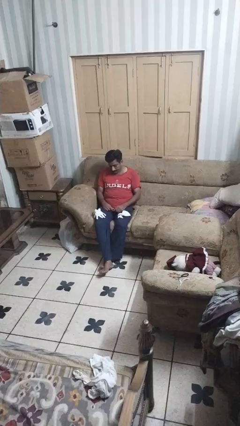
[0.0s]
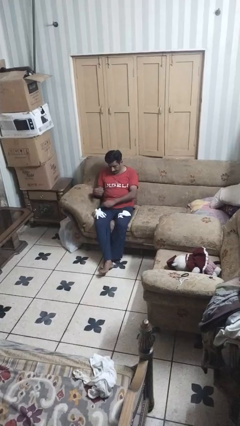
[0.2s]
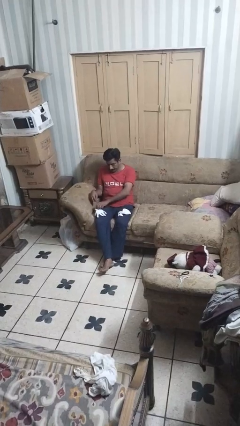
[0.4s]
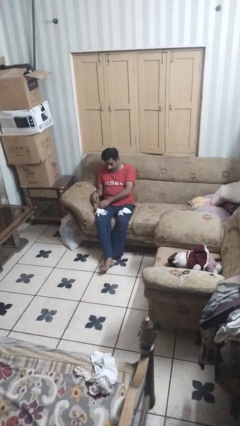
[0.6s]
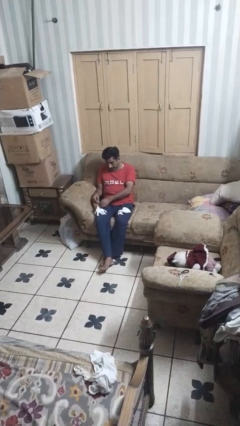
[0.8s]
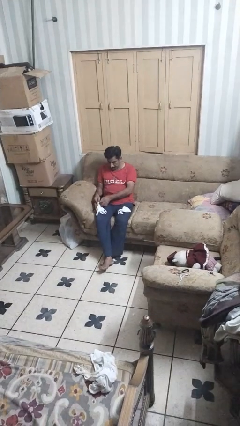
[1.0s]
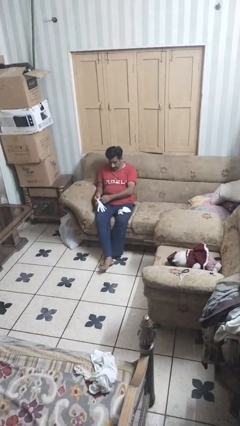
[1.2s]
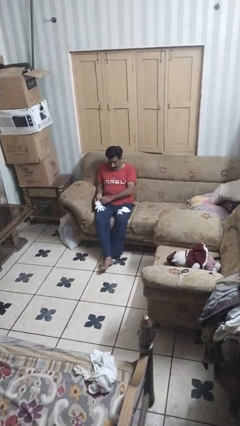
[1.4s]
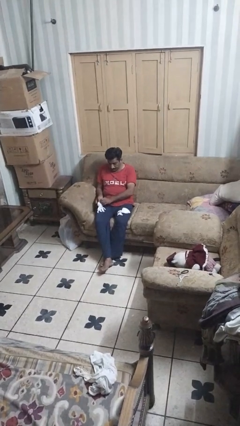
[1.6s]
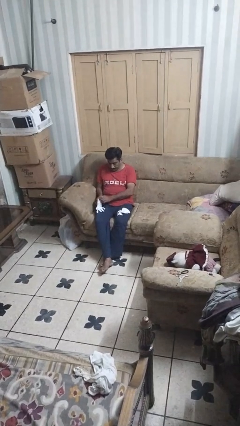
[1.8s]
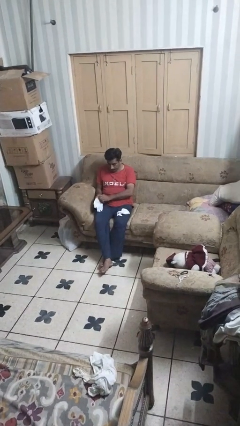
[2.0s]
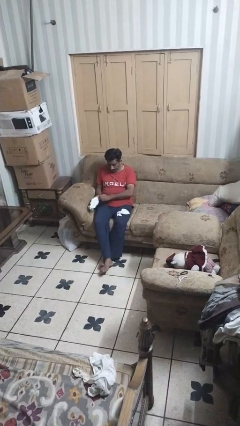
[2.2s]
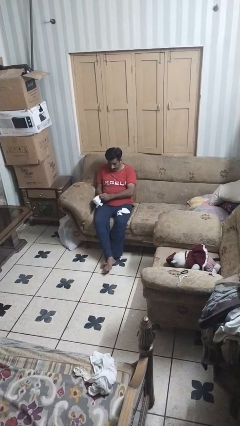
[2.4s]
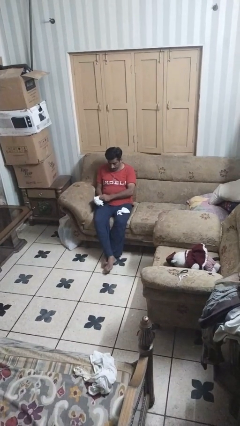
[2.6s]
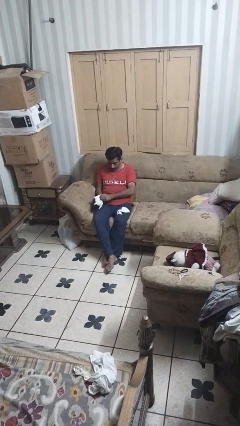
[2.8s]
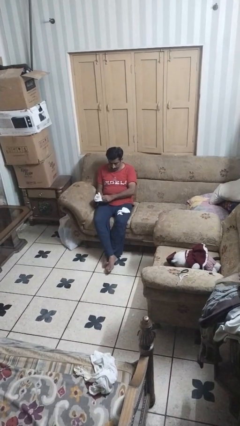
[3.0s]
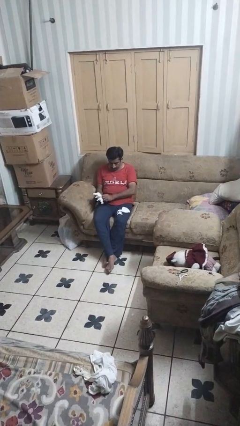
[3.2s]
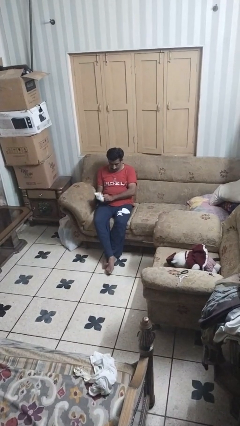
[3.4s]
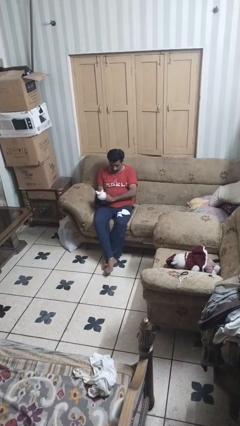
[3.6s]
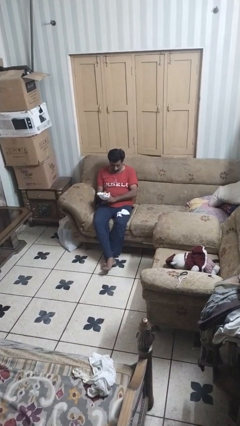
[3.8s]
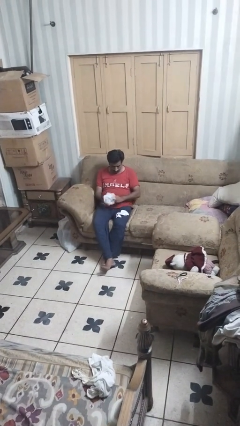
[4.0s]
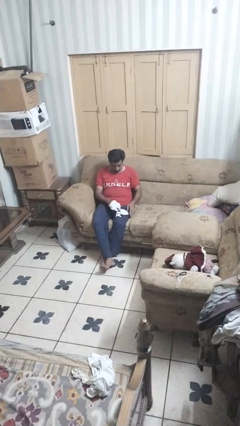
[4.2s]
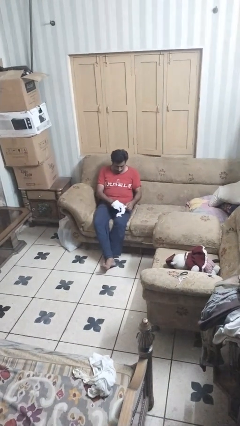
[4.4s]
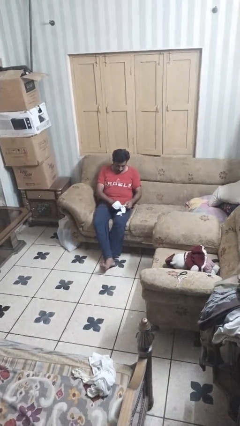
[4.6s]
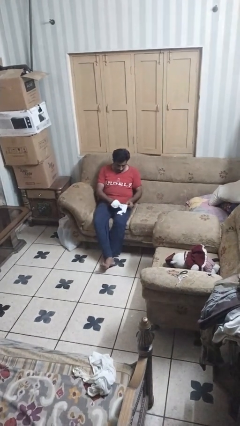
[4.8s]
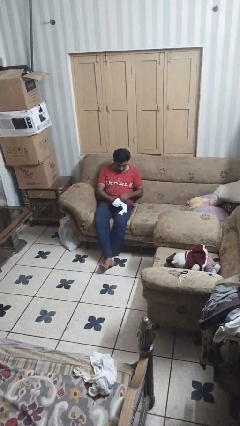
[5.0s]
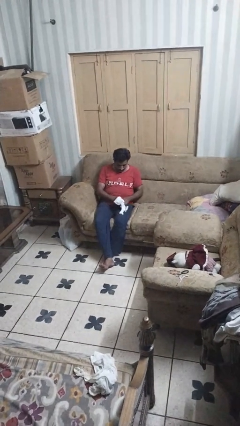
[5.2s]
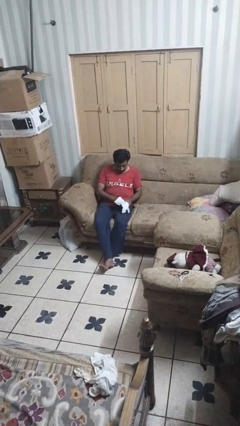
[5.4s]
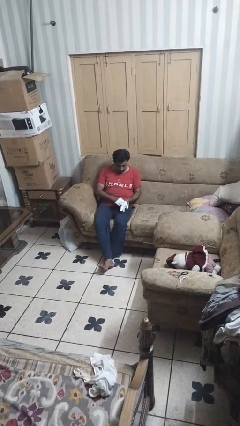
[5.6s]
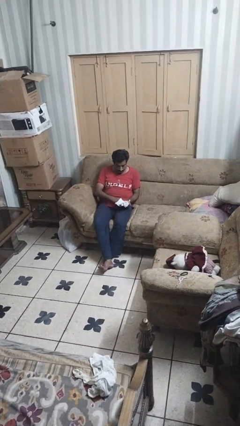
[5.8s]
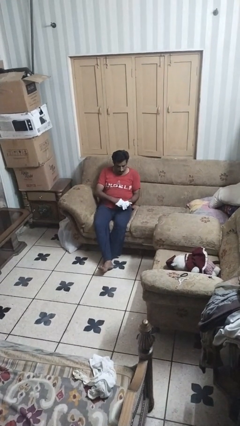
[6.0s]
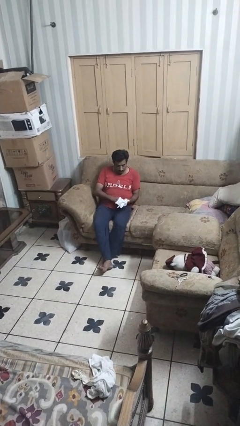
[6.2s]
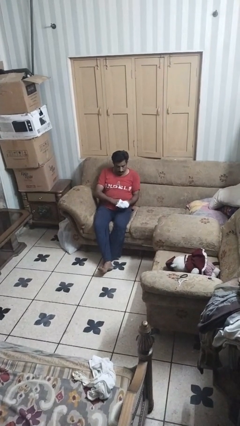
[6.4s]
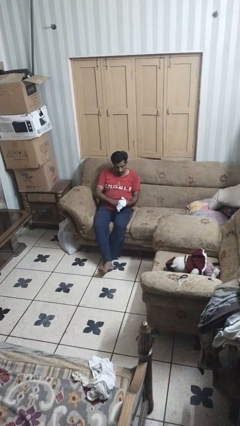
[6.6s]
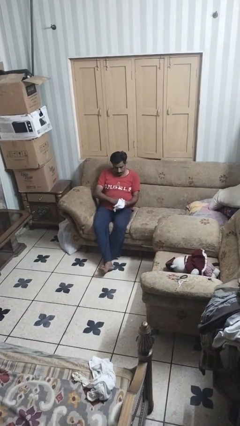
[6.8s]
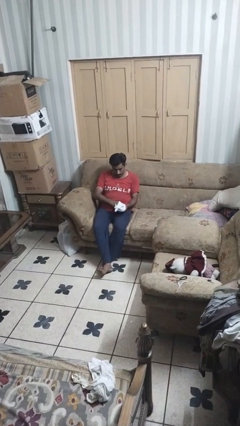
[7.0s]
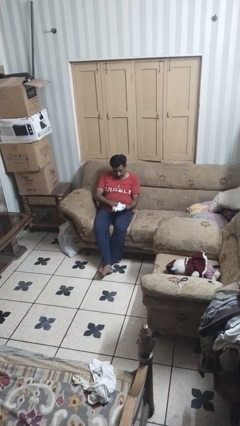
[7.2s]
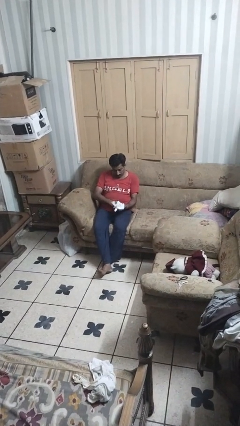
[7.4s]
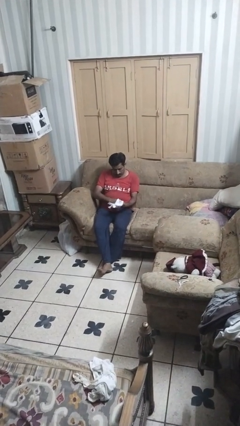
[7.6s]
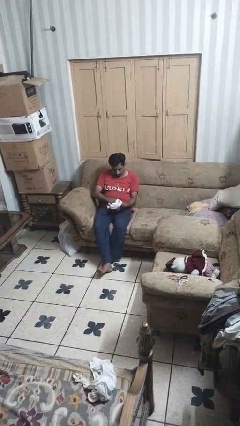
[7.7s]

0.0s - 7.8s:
person puts on gloves

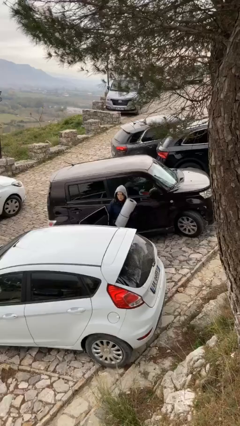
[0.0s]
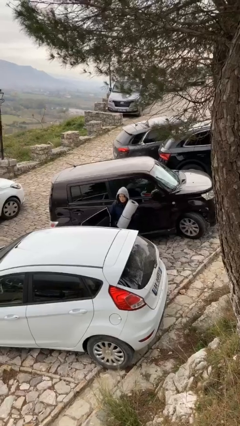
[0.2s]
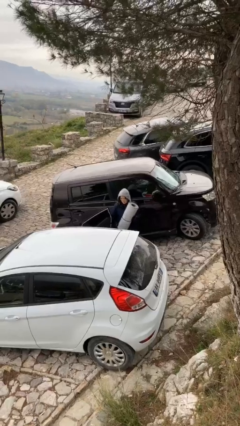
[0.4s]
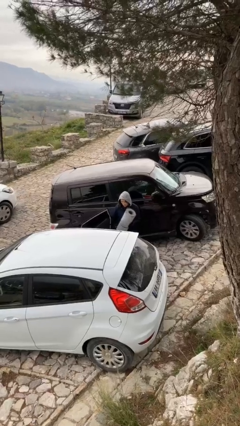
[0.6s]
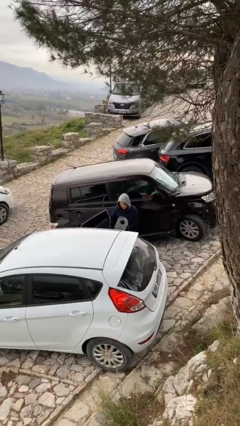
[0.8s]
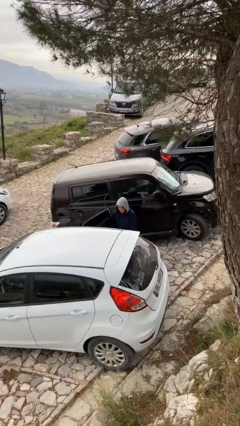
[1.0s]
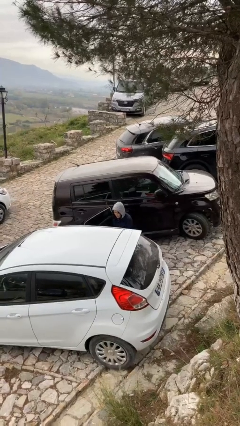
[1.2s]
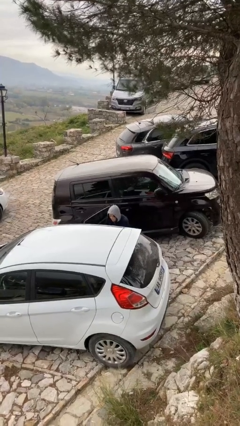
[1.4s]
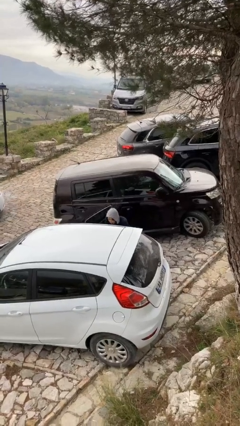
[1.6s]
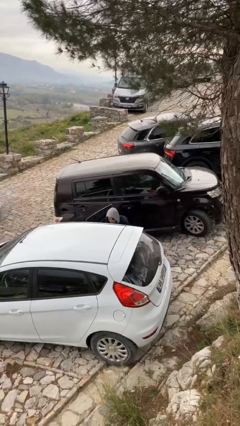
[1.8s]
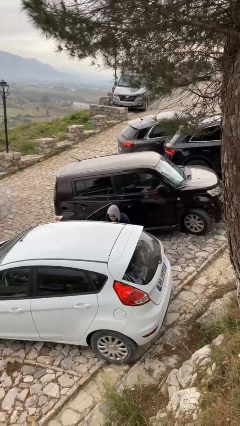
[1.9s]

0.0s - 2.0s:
person loads car

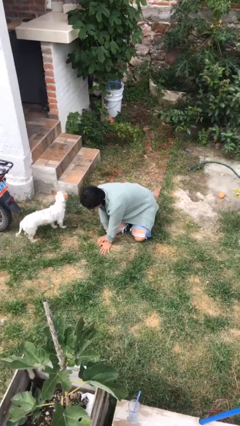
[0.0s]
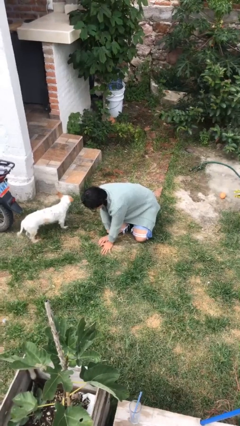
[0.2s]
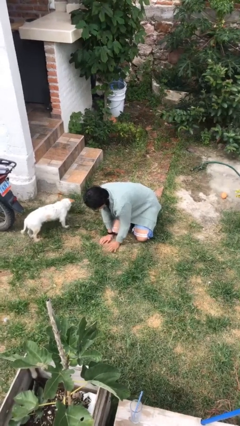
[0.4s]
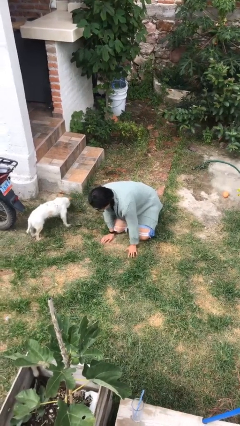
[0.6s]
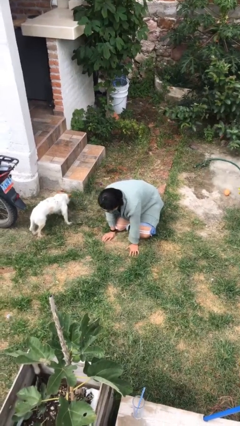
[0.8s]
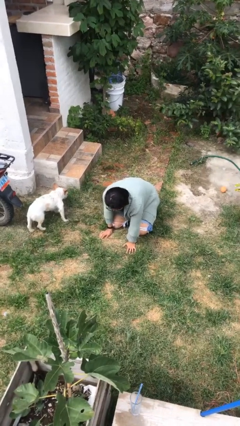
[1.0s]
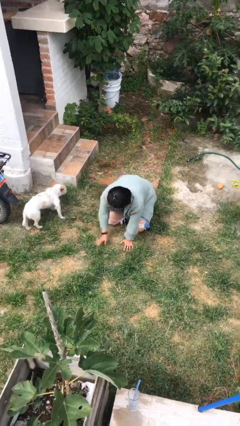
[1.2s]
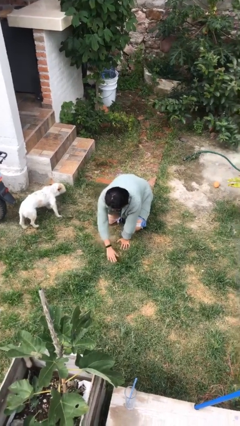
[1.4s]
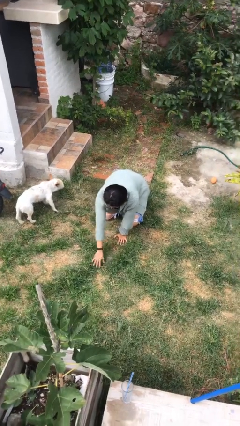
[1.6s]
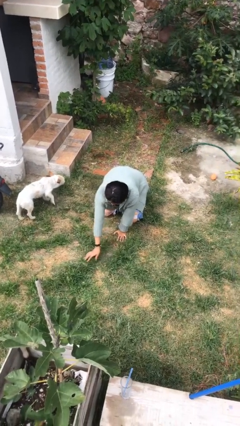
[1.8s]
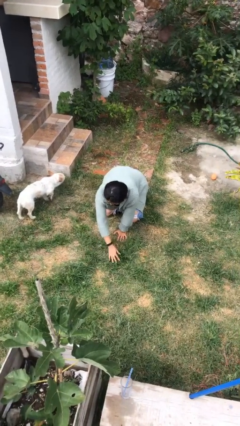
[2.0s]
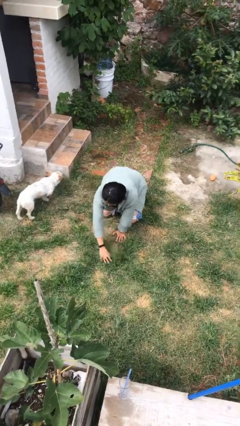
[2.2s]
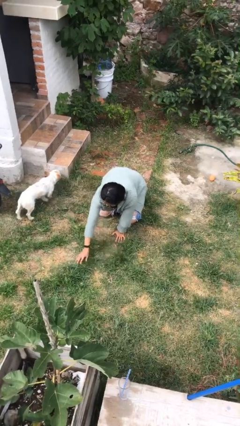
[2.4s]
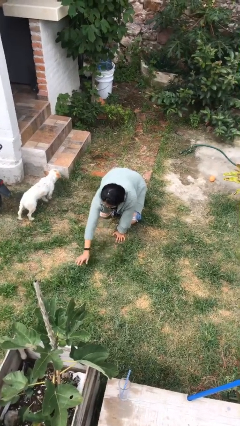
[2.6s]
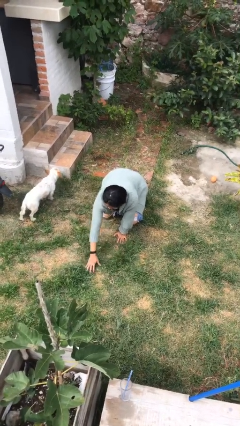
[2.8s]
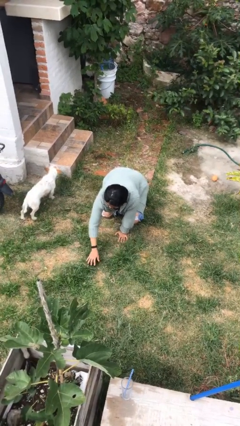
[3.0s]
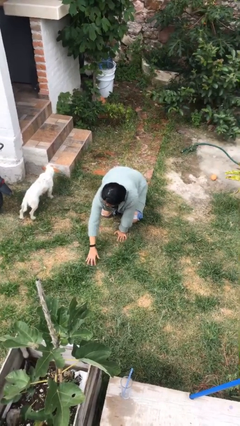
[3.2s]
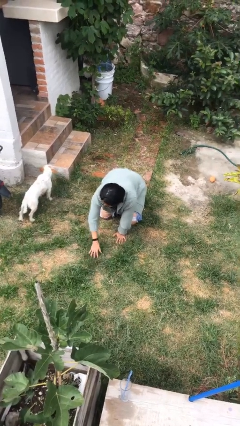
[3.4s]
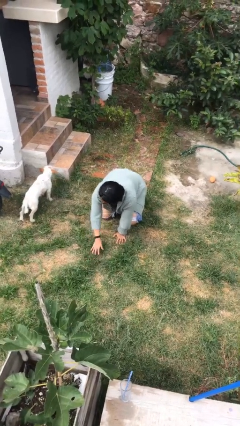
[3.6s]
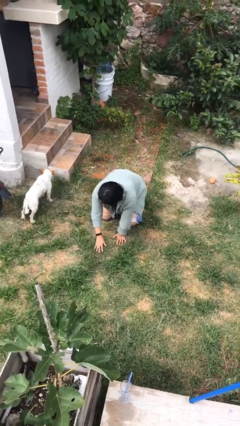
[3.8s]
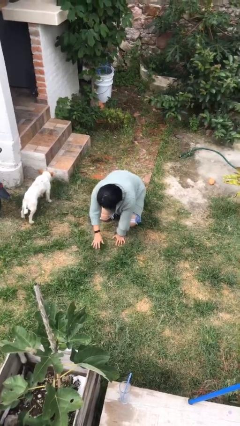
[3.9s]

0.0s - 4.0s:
person crawls

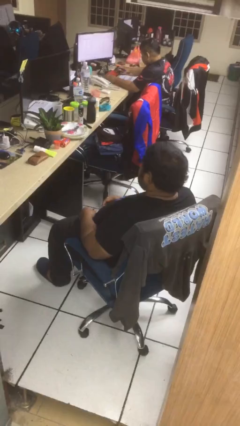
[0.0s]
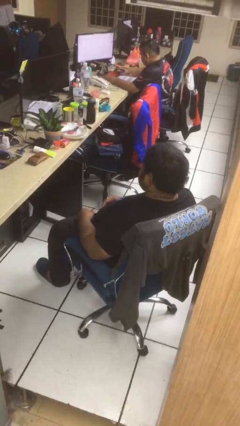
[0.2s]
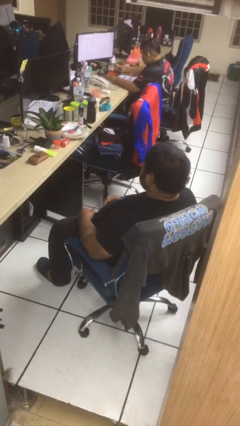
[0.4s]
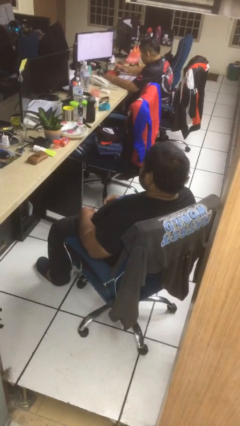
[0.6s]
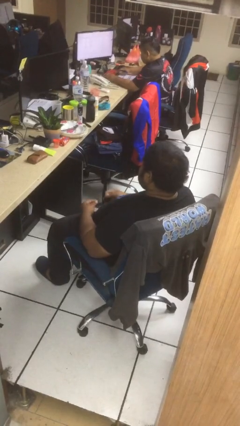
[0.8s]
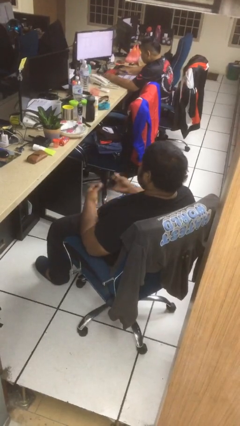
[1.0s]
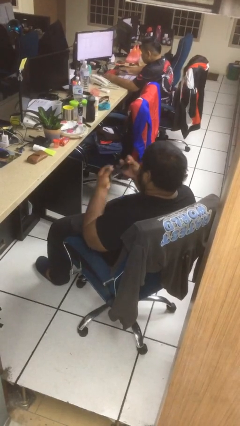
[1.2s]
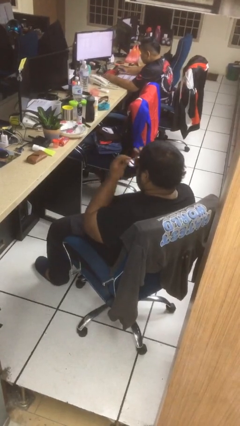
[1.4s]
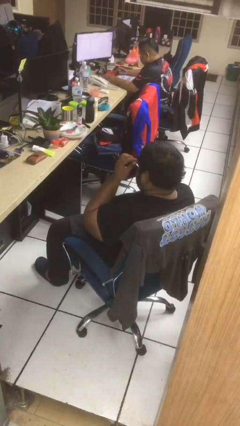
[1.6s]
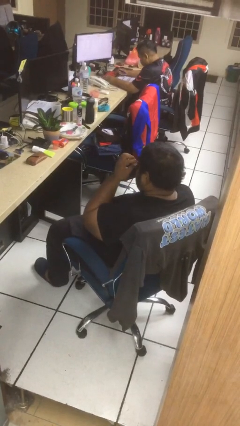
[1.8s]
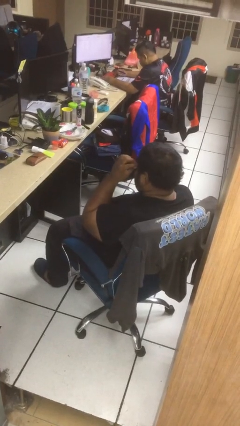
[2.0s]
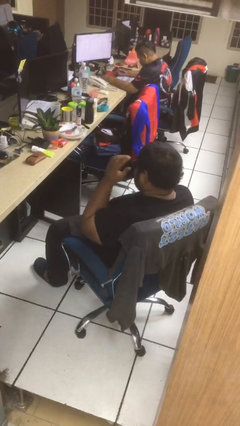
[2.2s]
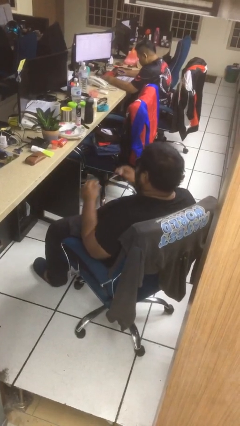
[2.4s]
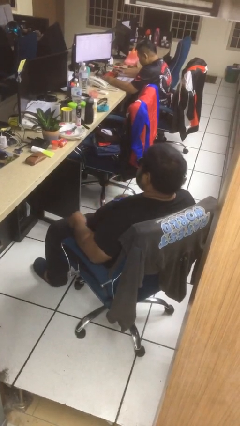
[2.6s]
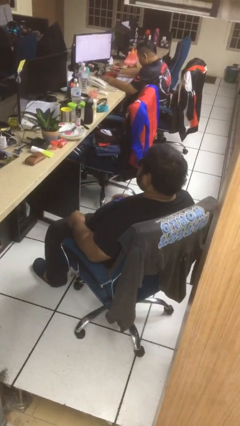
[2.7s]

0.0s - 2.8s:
person puts on sunglasses

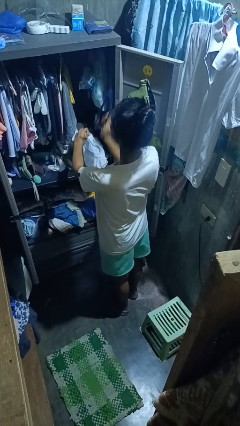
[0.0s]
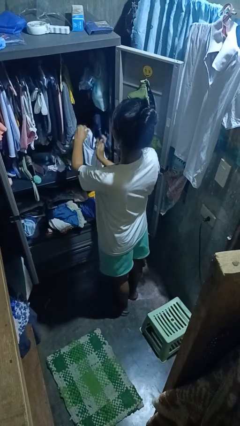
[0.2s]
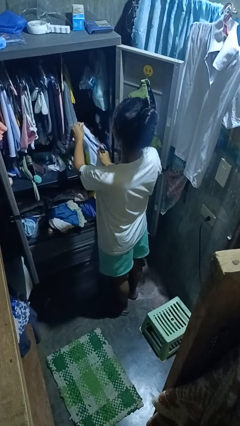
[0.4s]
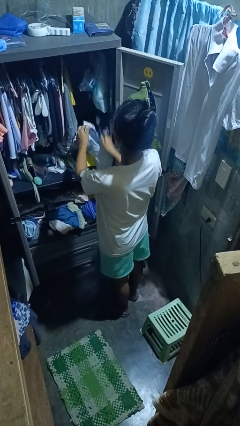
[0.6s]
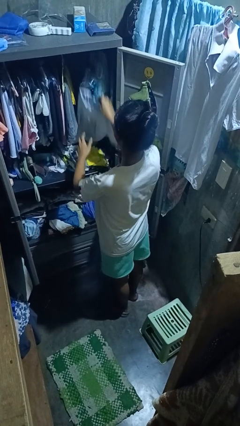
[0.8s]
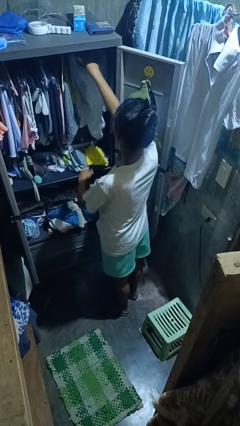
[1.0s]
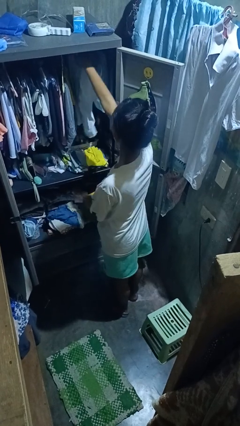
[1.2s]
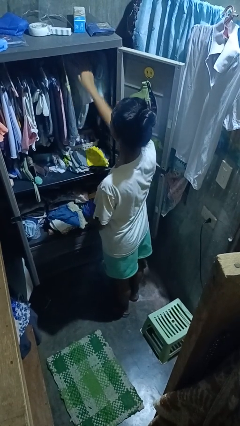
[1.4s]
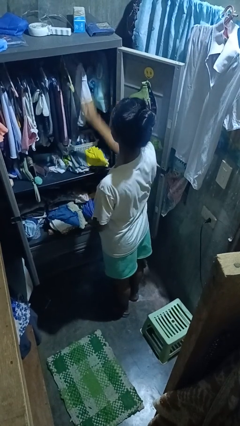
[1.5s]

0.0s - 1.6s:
person puts clothes into closet
